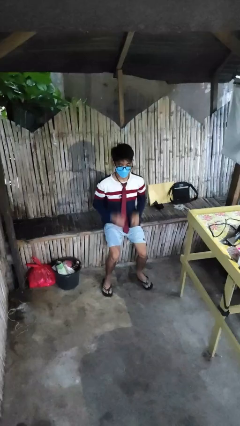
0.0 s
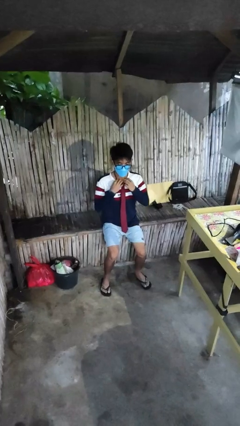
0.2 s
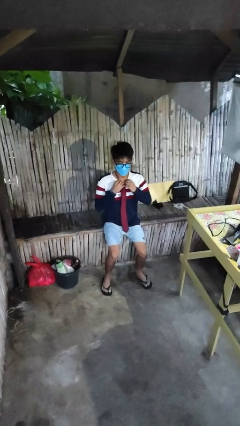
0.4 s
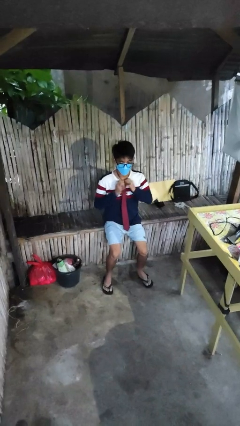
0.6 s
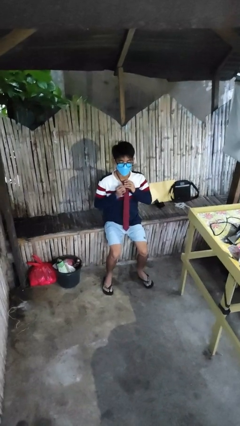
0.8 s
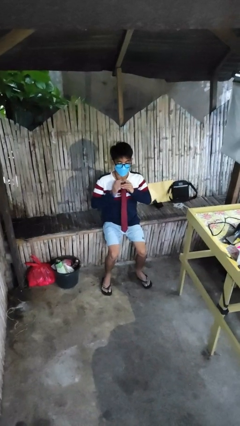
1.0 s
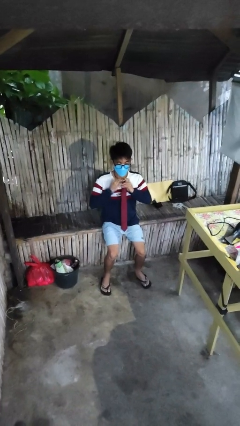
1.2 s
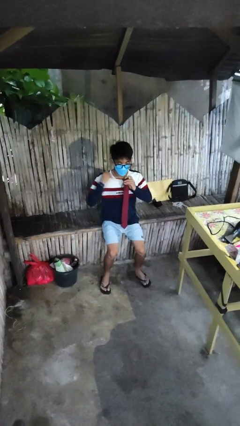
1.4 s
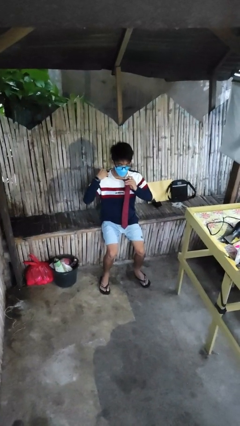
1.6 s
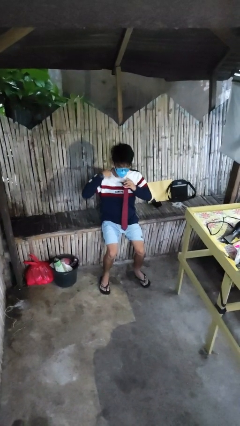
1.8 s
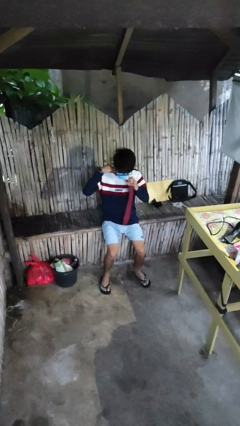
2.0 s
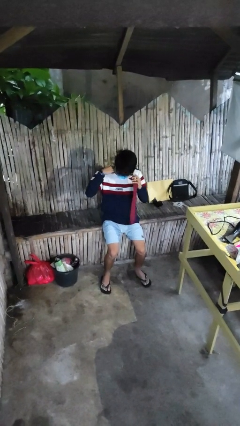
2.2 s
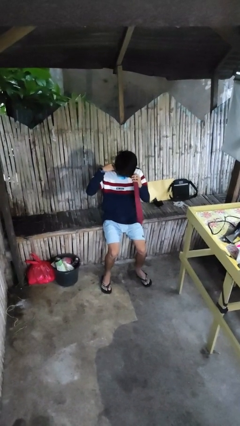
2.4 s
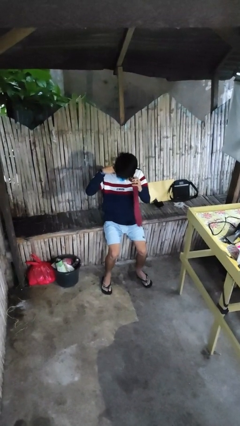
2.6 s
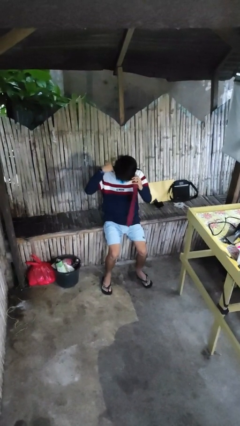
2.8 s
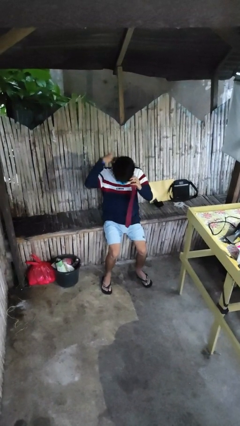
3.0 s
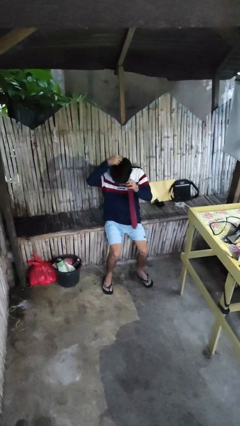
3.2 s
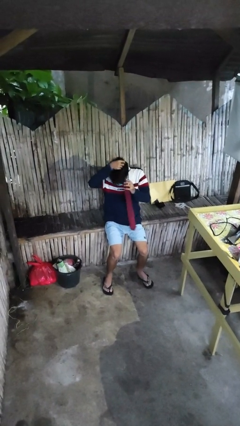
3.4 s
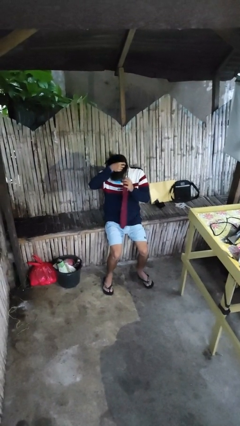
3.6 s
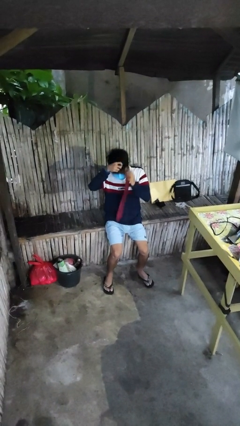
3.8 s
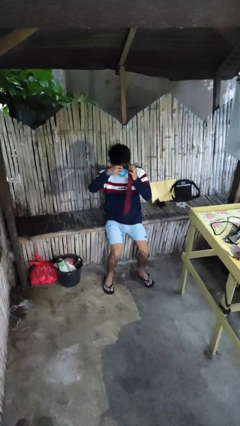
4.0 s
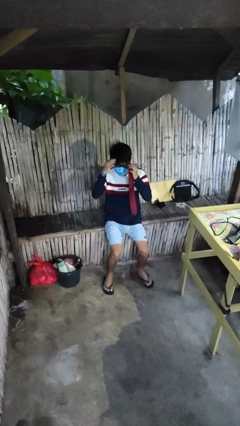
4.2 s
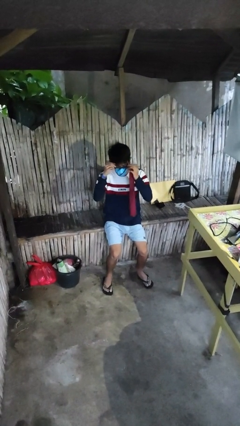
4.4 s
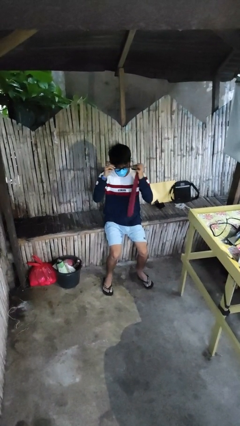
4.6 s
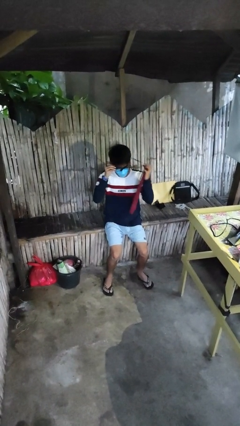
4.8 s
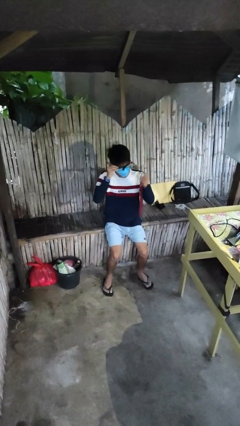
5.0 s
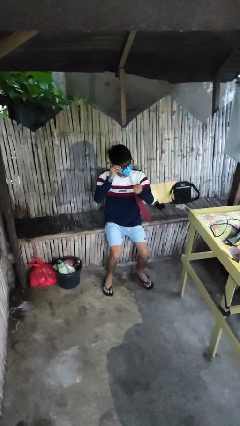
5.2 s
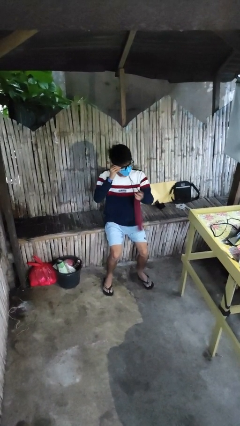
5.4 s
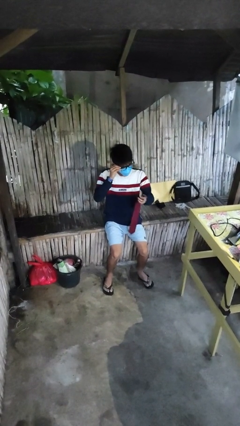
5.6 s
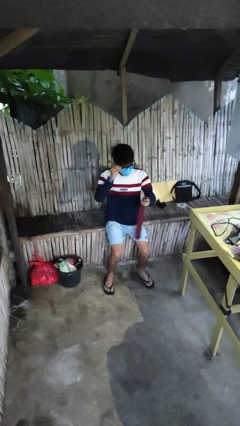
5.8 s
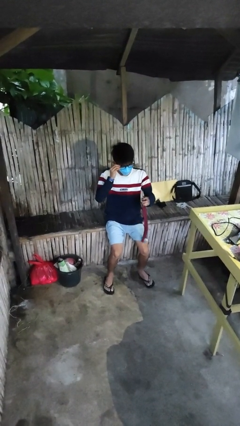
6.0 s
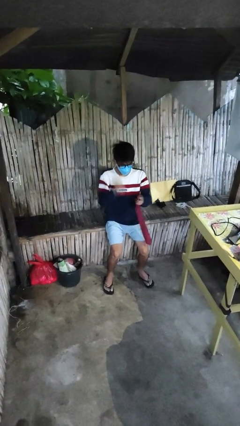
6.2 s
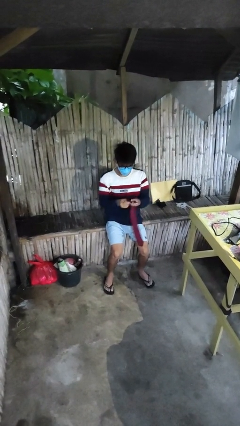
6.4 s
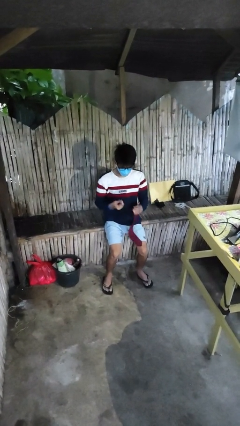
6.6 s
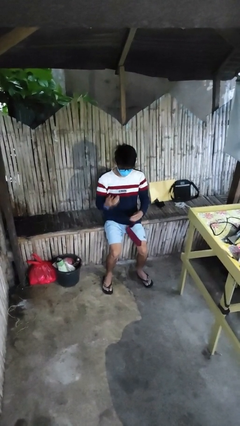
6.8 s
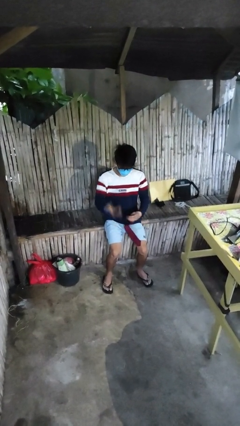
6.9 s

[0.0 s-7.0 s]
person takes off necktie

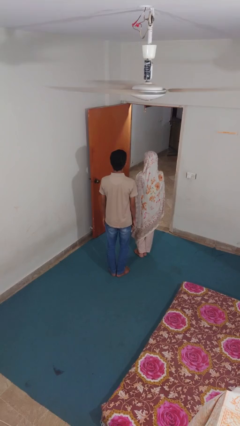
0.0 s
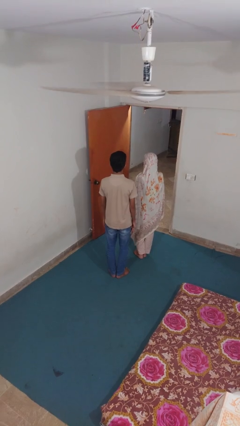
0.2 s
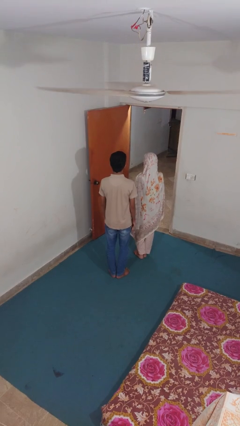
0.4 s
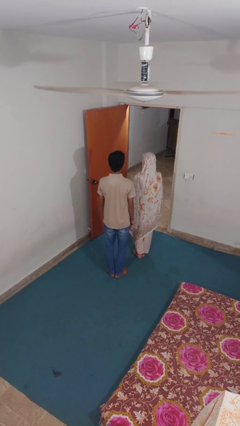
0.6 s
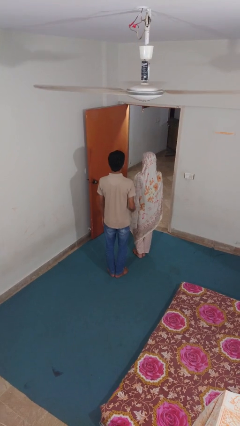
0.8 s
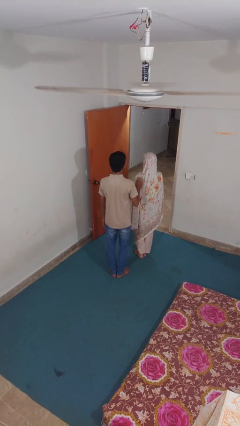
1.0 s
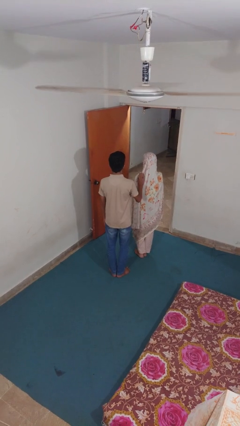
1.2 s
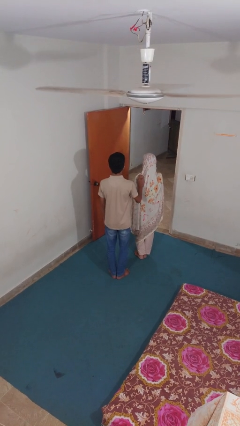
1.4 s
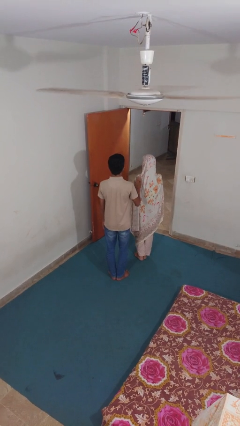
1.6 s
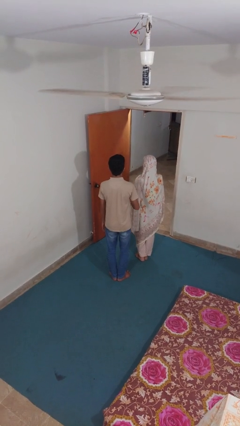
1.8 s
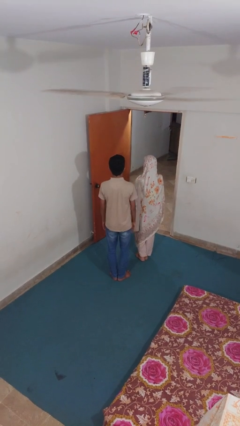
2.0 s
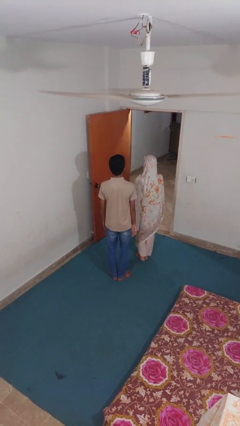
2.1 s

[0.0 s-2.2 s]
person touches back of person

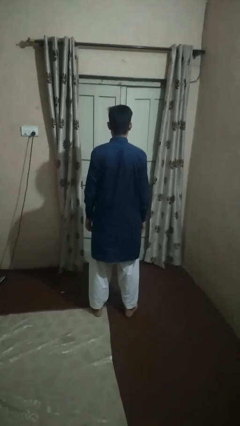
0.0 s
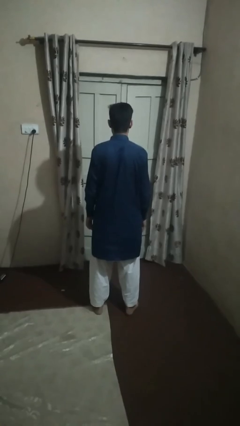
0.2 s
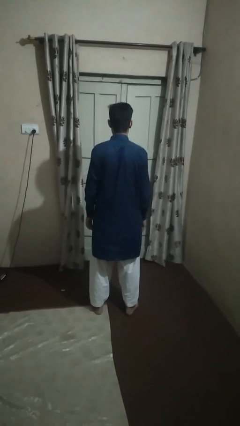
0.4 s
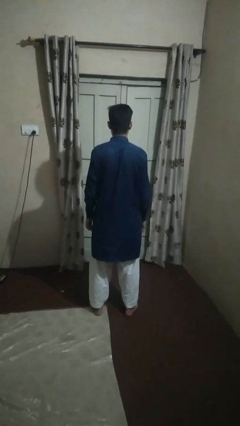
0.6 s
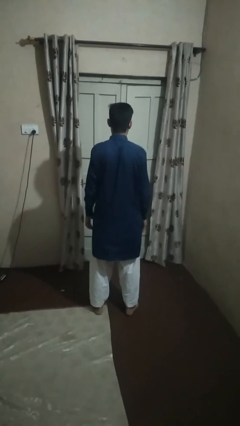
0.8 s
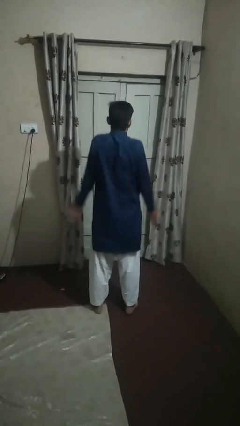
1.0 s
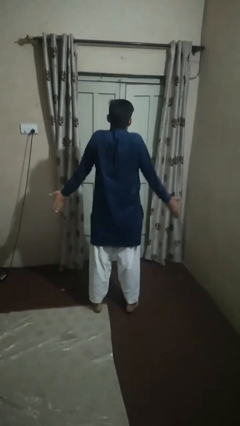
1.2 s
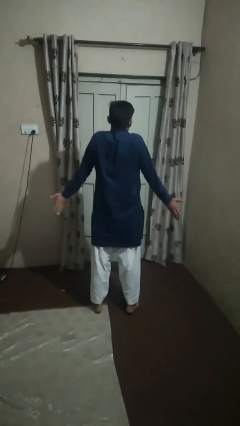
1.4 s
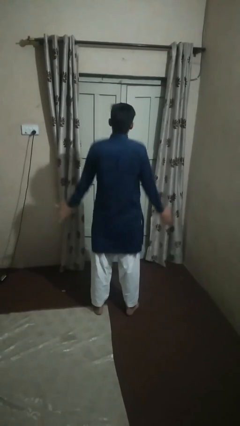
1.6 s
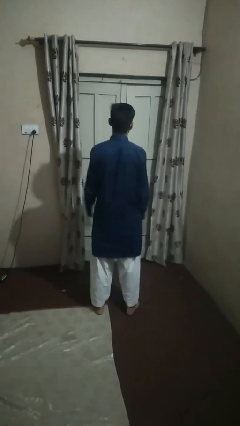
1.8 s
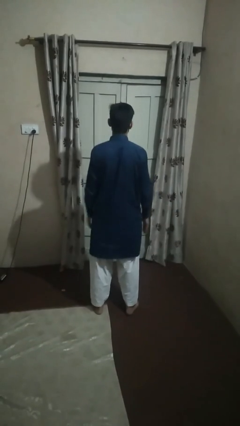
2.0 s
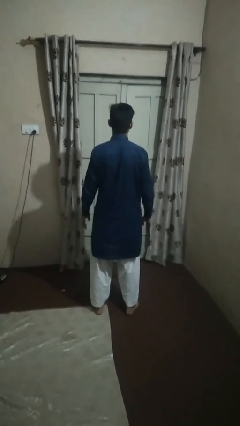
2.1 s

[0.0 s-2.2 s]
person shrugs

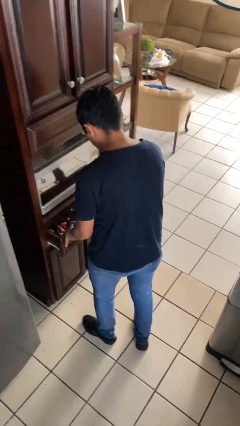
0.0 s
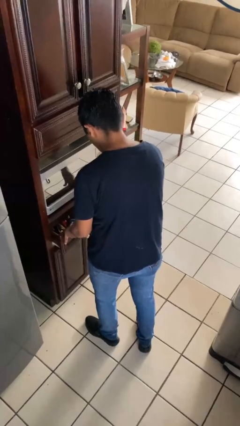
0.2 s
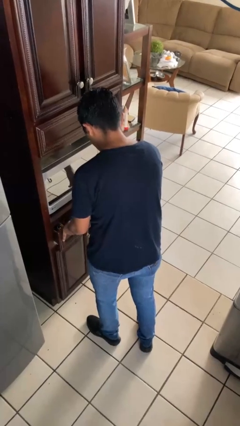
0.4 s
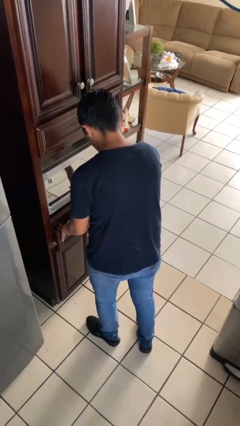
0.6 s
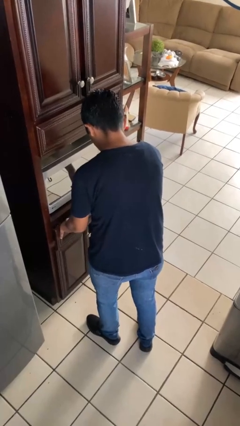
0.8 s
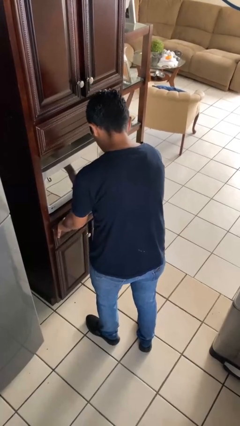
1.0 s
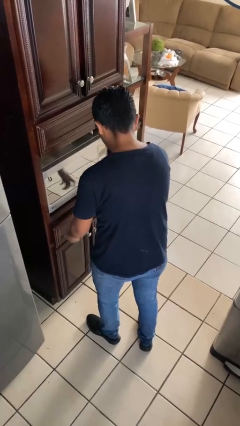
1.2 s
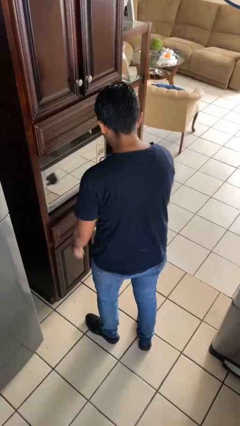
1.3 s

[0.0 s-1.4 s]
person closes kitchen drawer

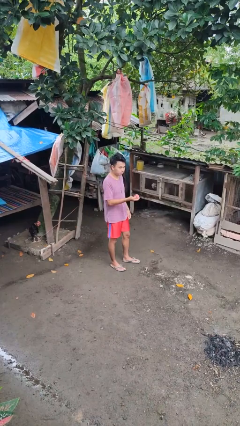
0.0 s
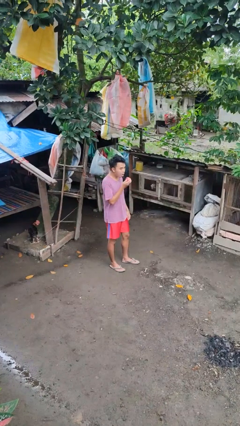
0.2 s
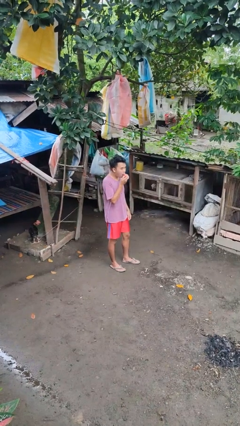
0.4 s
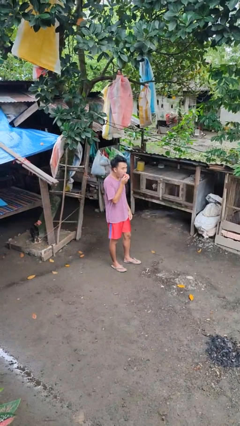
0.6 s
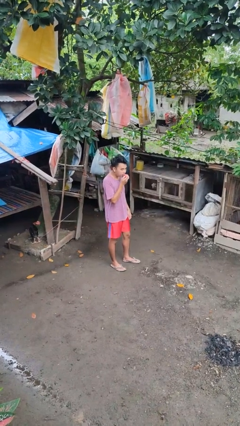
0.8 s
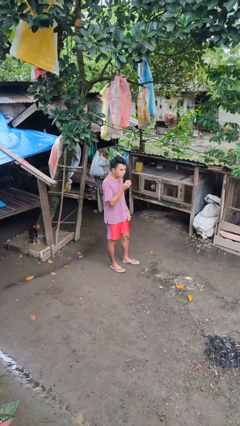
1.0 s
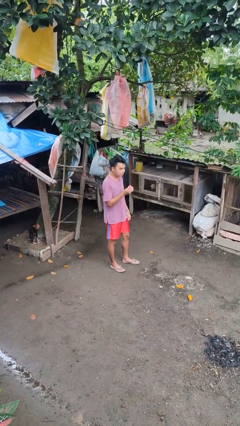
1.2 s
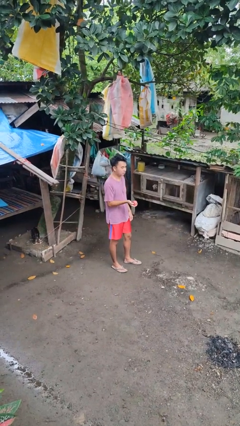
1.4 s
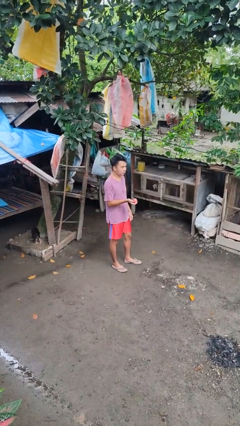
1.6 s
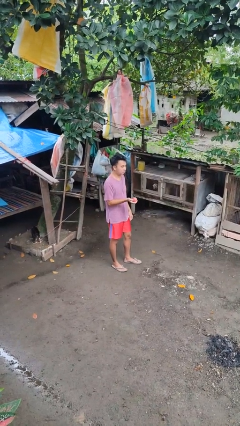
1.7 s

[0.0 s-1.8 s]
person eats apple

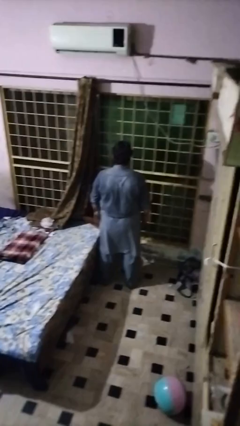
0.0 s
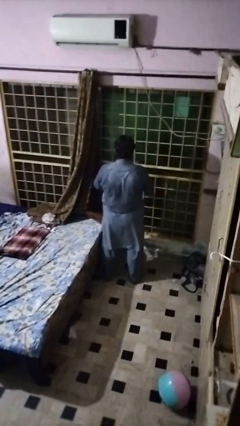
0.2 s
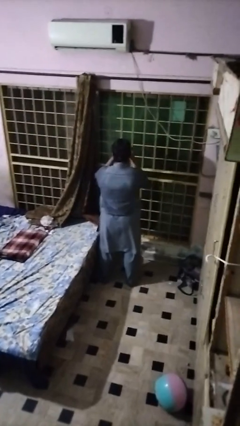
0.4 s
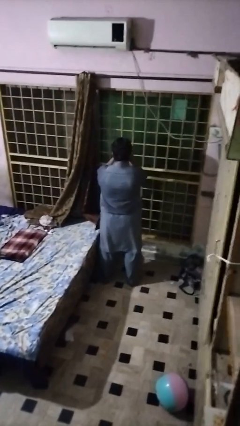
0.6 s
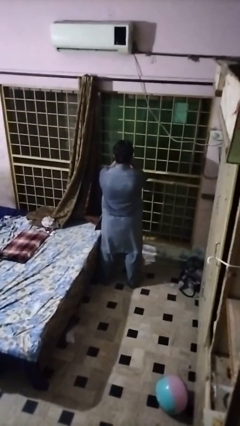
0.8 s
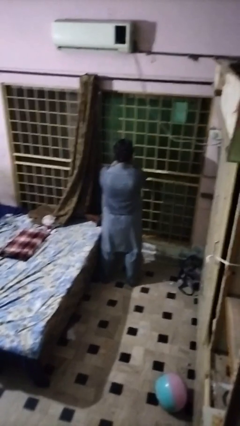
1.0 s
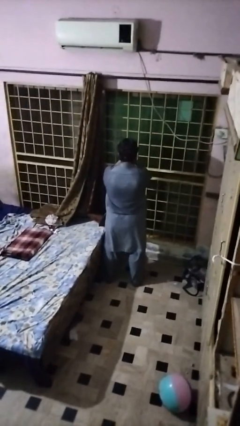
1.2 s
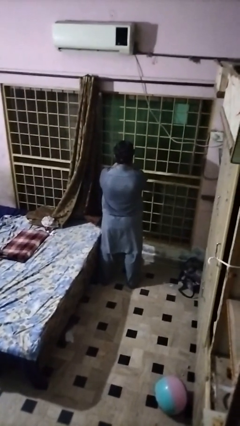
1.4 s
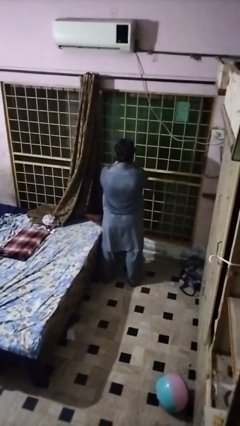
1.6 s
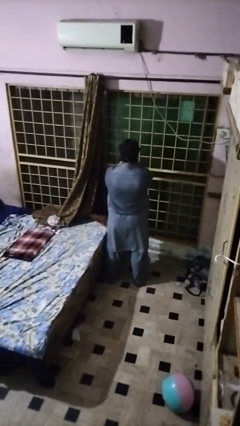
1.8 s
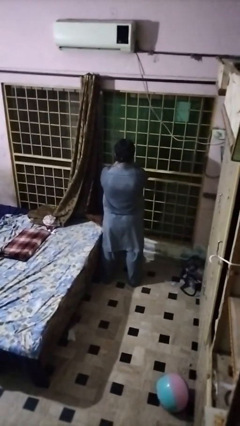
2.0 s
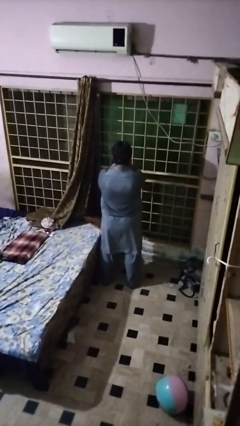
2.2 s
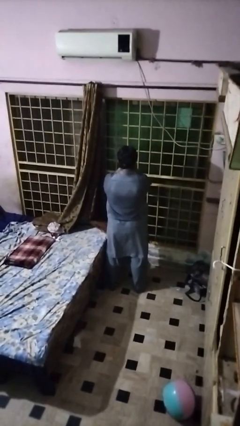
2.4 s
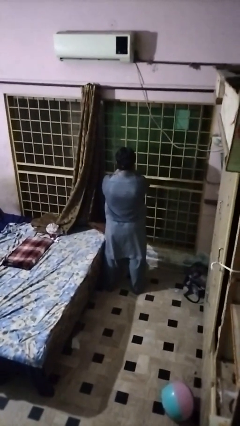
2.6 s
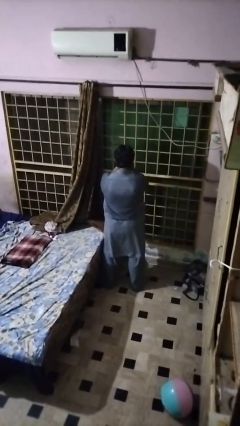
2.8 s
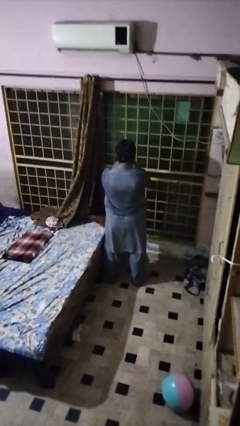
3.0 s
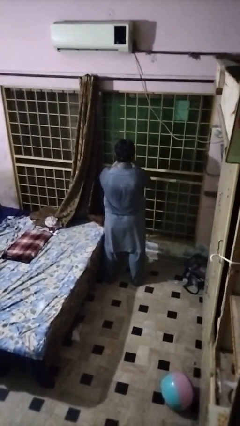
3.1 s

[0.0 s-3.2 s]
person covers face with hands

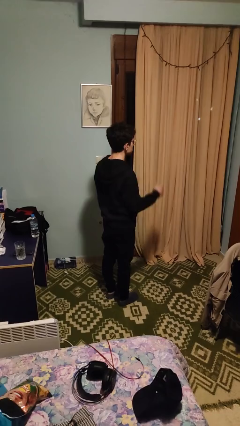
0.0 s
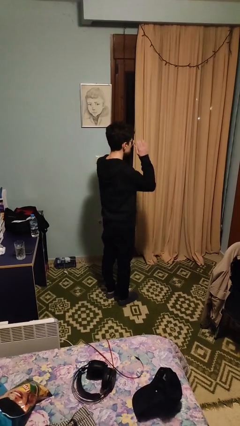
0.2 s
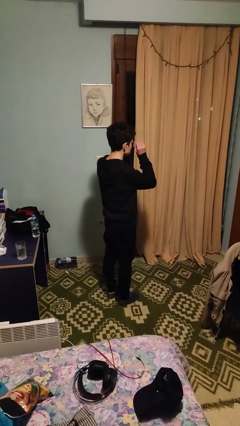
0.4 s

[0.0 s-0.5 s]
person takes off glasses
